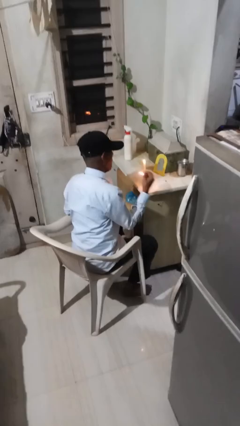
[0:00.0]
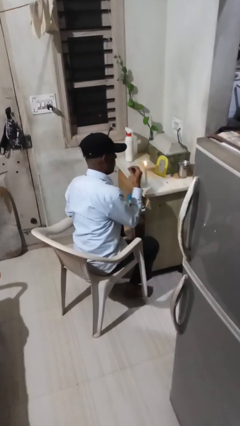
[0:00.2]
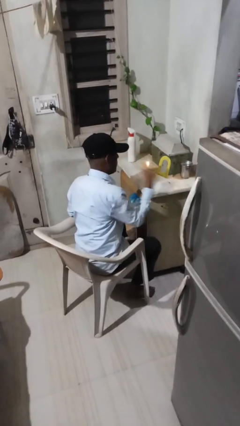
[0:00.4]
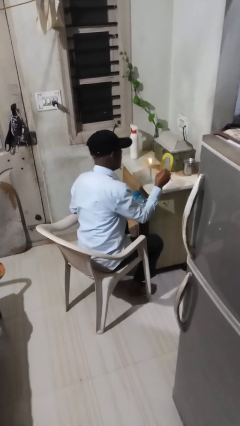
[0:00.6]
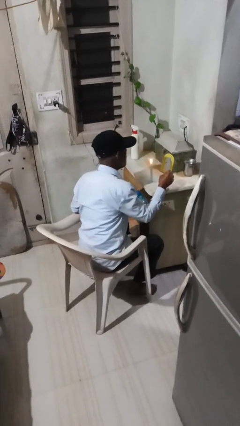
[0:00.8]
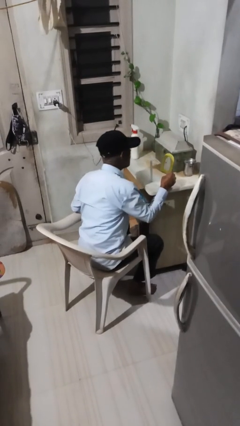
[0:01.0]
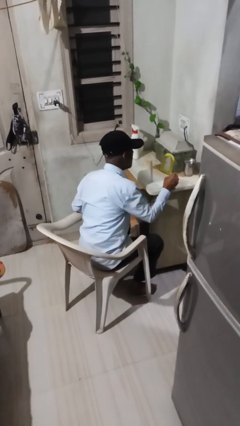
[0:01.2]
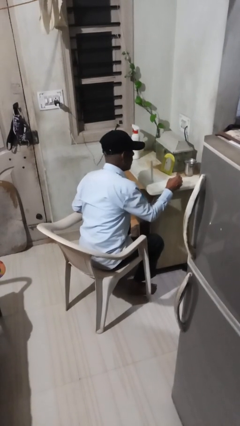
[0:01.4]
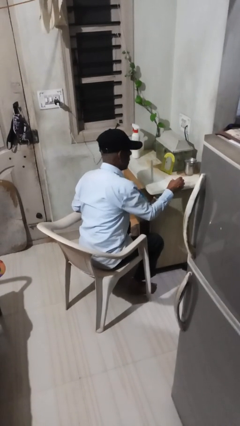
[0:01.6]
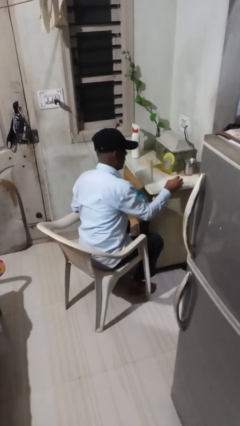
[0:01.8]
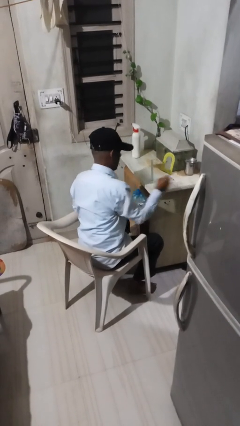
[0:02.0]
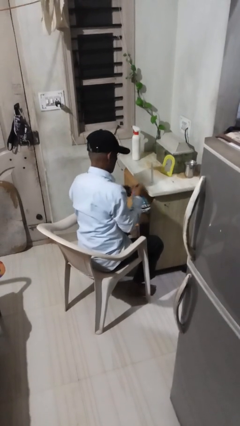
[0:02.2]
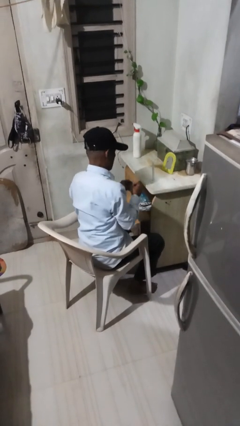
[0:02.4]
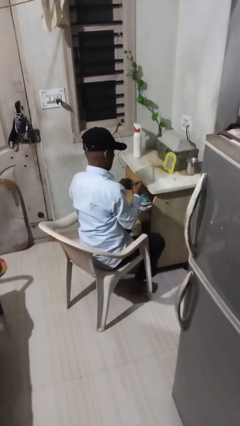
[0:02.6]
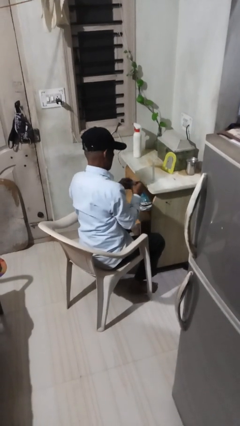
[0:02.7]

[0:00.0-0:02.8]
person extinguishes candle

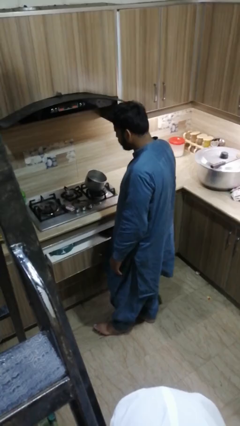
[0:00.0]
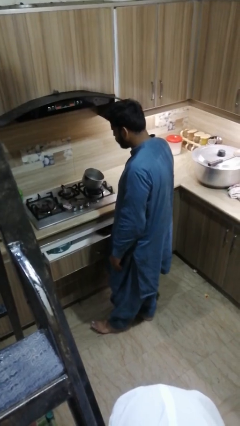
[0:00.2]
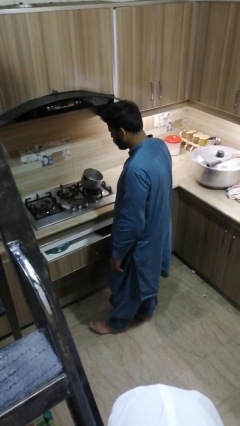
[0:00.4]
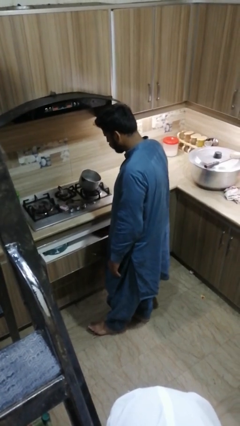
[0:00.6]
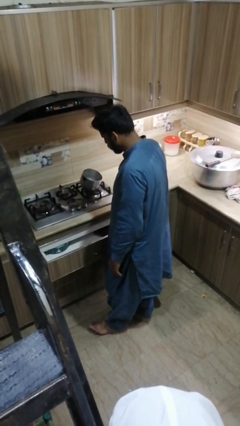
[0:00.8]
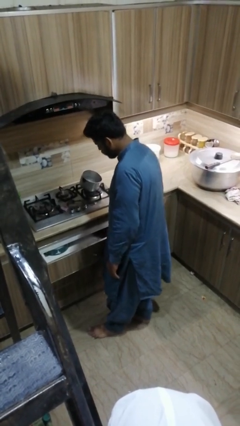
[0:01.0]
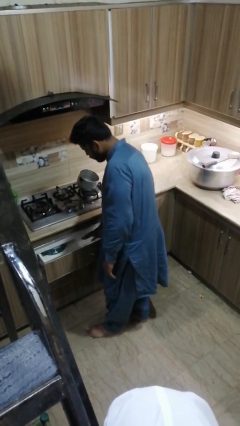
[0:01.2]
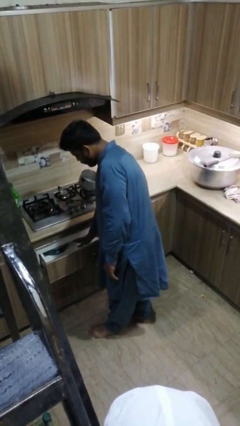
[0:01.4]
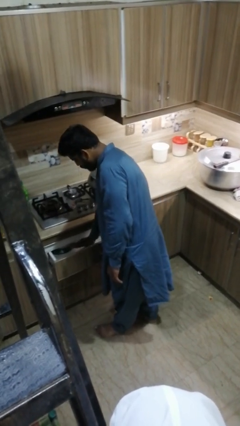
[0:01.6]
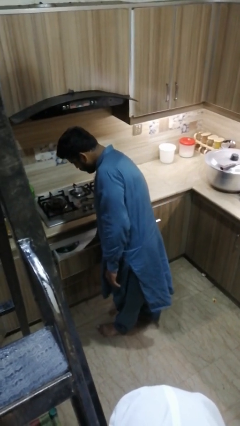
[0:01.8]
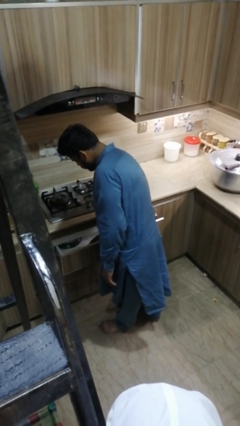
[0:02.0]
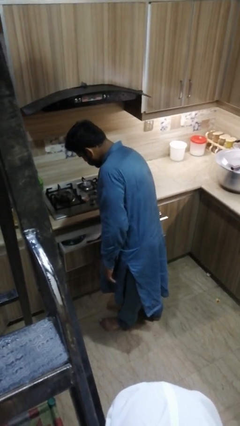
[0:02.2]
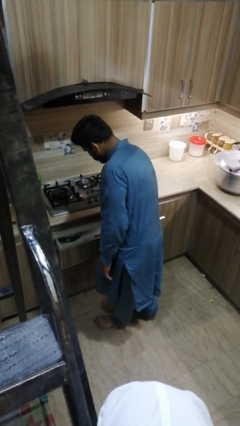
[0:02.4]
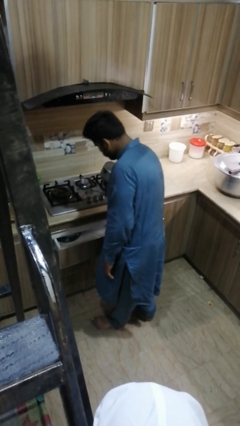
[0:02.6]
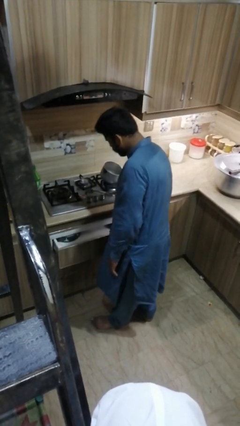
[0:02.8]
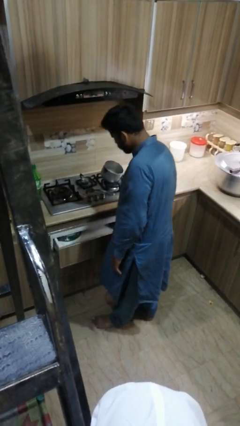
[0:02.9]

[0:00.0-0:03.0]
person searches in kitchen drawer

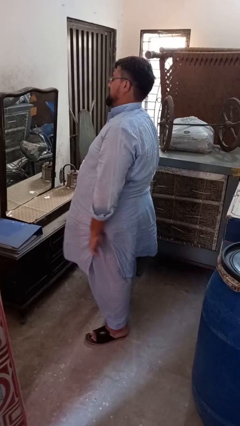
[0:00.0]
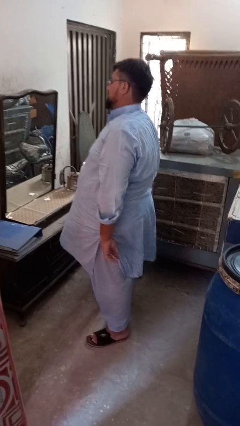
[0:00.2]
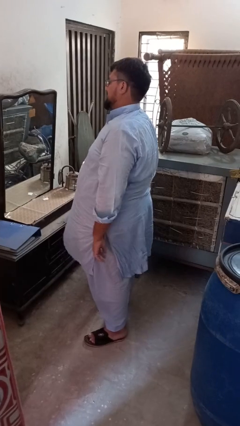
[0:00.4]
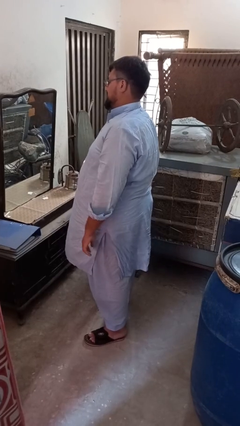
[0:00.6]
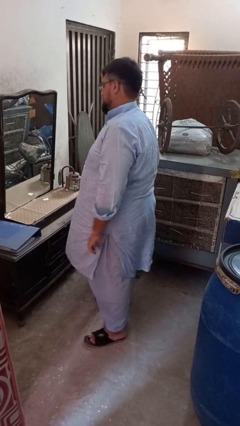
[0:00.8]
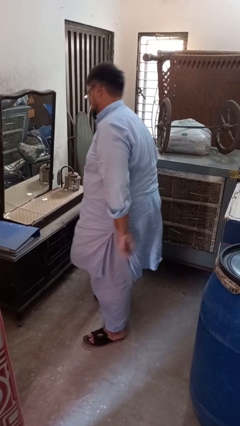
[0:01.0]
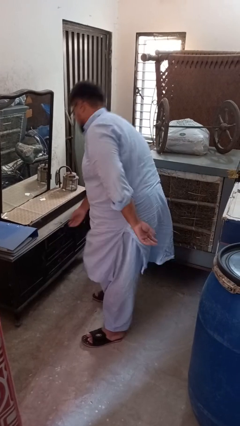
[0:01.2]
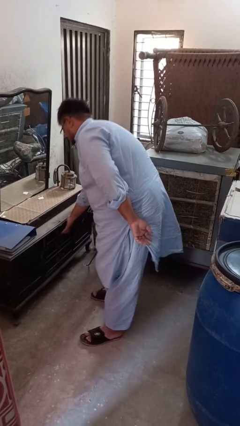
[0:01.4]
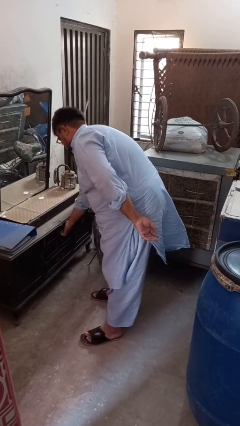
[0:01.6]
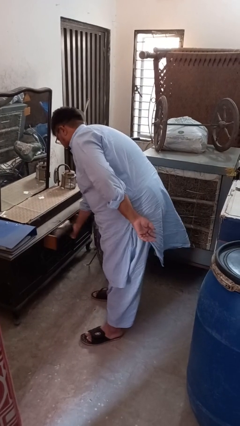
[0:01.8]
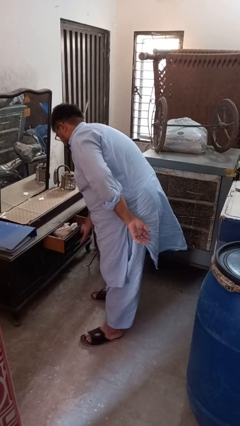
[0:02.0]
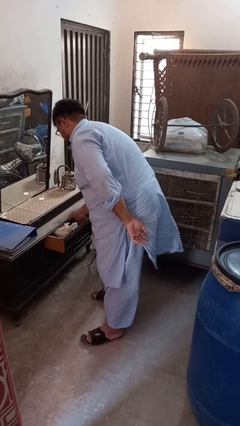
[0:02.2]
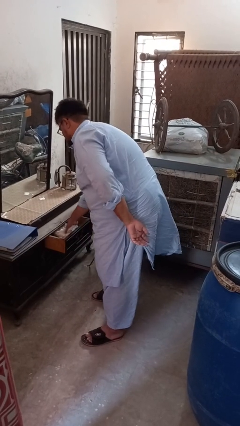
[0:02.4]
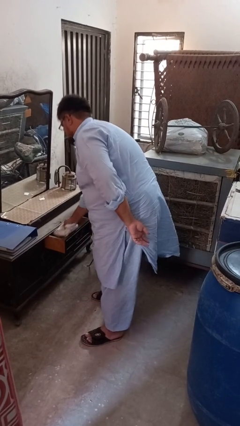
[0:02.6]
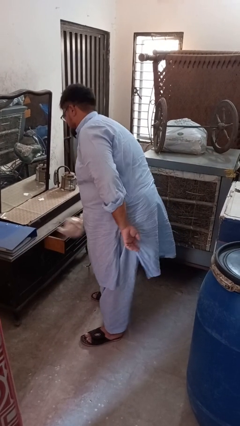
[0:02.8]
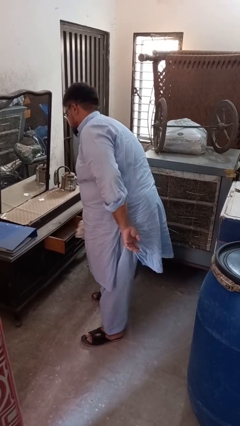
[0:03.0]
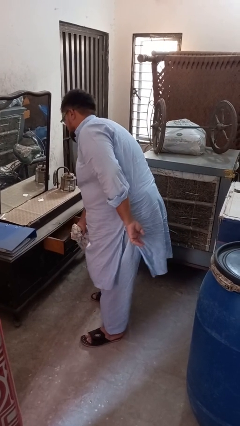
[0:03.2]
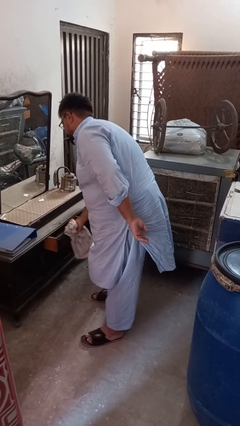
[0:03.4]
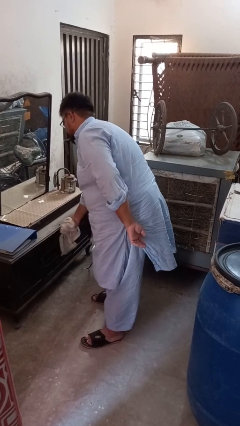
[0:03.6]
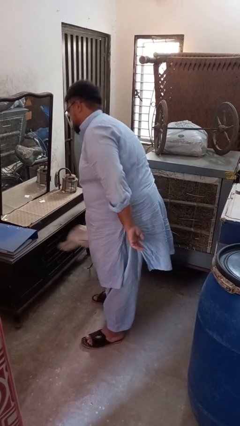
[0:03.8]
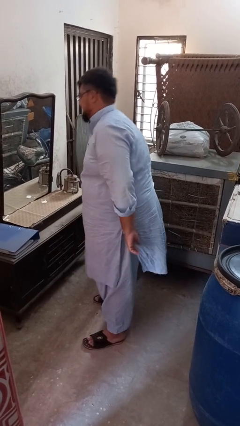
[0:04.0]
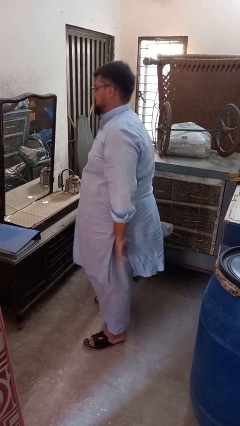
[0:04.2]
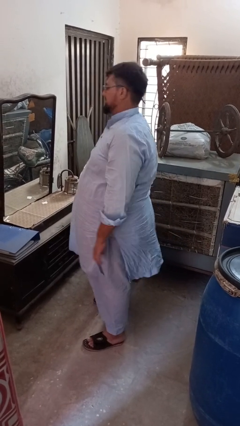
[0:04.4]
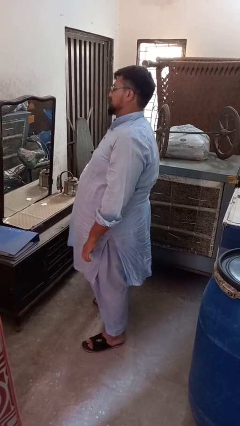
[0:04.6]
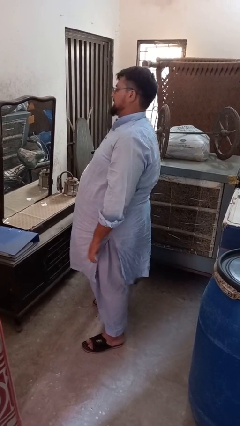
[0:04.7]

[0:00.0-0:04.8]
person takes clothes from dresser

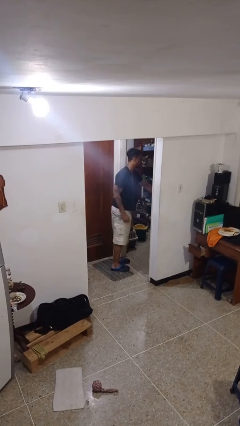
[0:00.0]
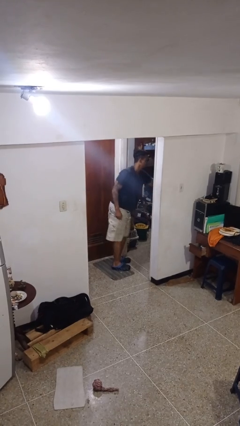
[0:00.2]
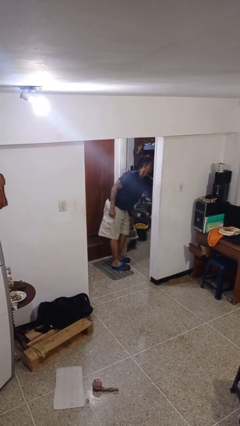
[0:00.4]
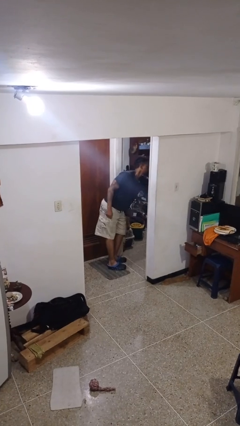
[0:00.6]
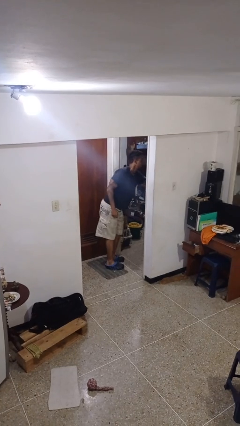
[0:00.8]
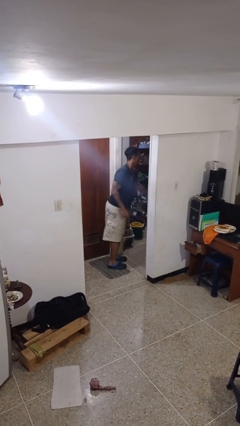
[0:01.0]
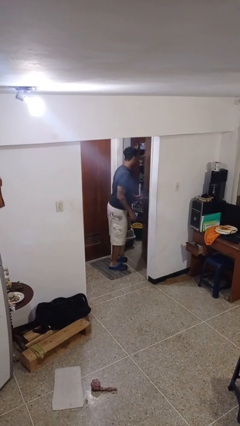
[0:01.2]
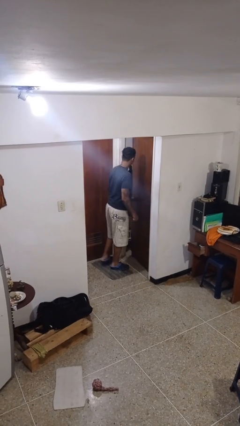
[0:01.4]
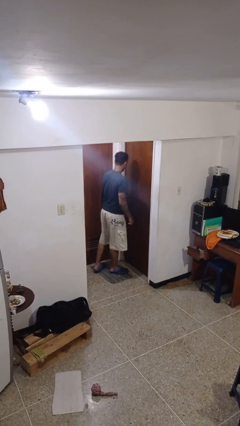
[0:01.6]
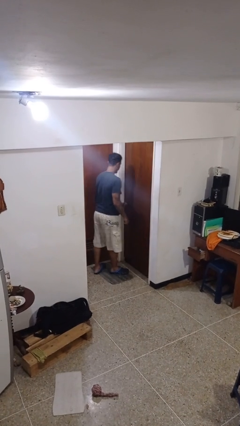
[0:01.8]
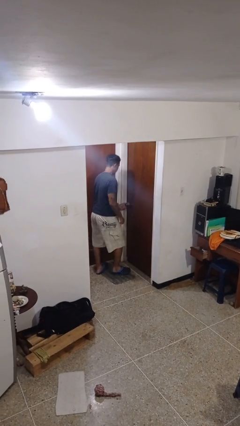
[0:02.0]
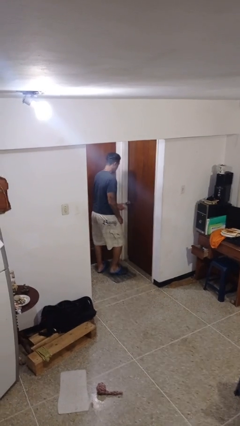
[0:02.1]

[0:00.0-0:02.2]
person closes facility door

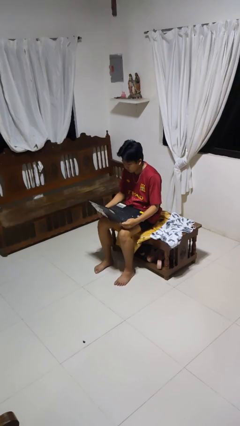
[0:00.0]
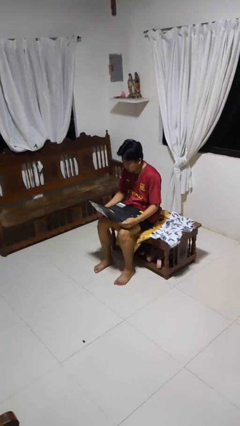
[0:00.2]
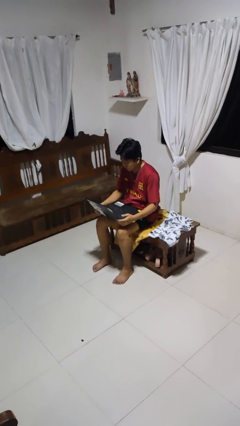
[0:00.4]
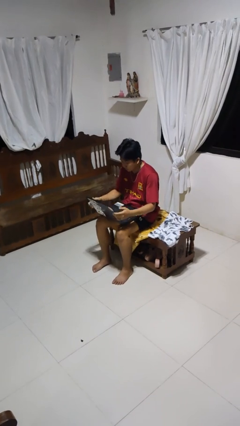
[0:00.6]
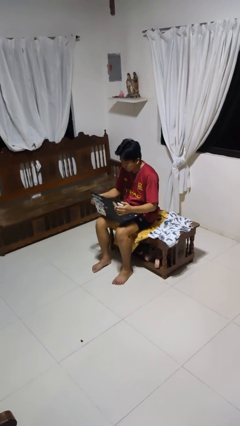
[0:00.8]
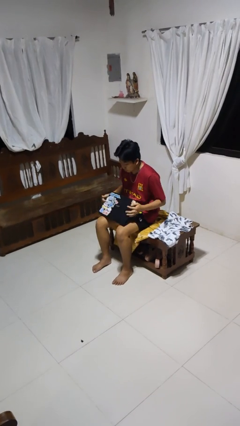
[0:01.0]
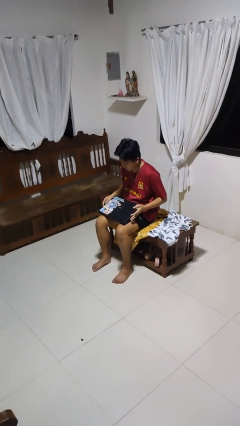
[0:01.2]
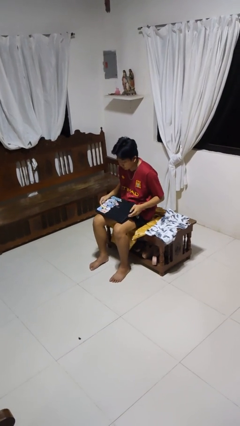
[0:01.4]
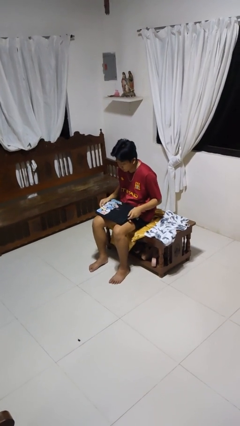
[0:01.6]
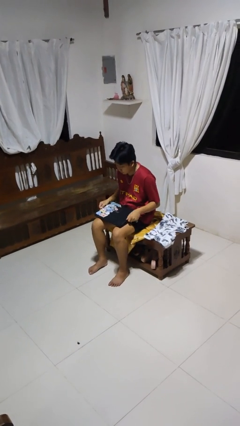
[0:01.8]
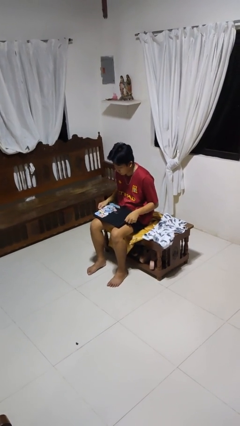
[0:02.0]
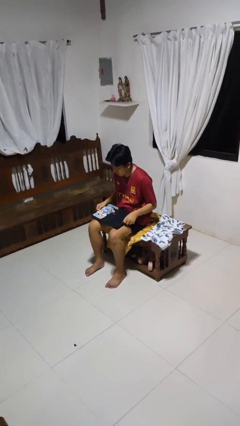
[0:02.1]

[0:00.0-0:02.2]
person closes laptop

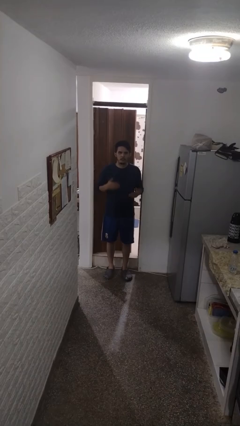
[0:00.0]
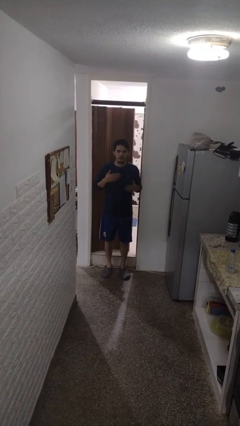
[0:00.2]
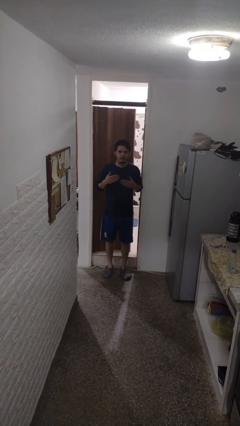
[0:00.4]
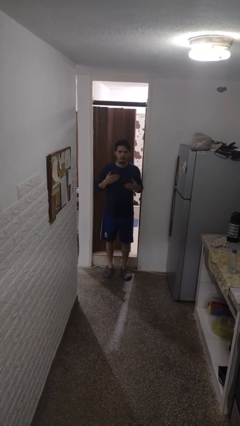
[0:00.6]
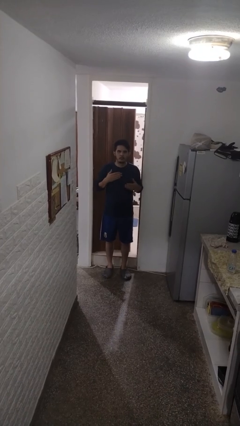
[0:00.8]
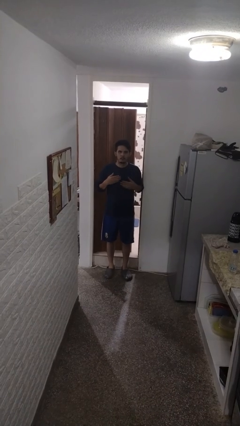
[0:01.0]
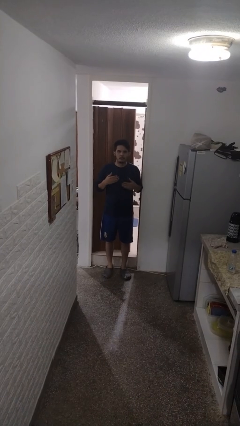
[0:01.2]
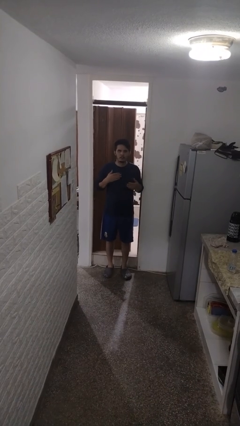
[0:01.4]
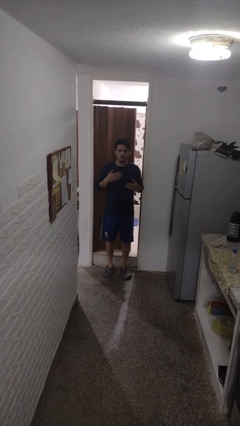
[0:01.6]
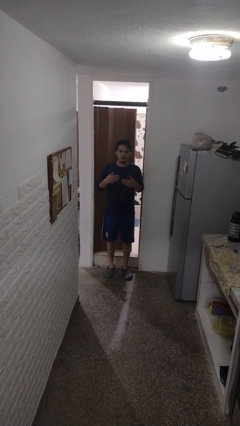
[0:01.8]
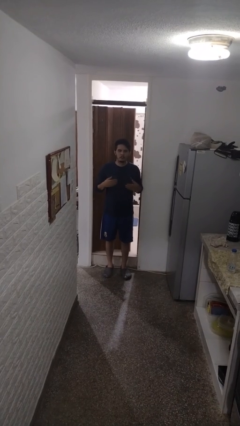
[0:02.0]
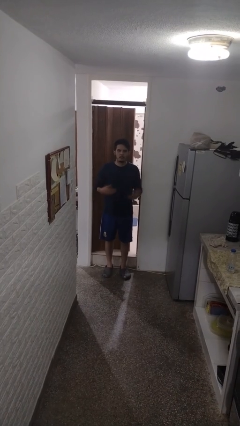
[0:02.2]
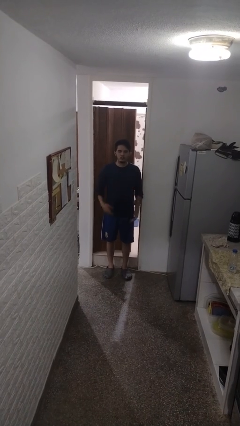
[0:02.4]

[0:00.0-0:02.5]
person drums on chest

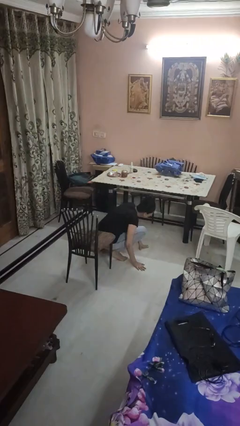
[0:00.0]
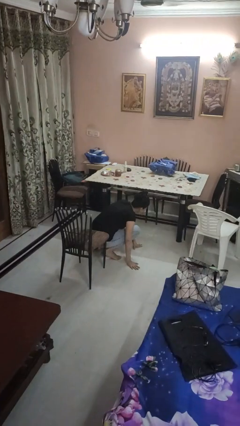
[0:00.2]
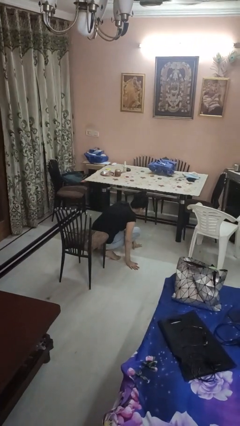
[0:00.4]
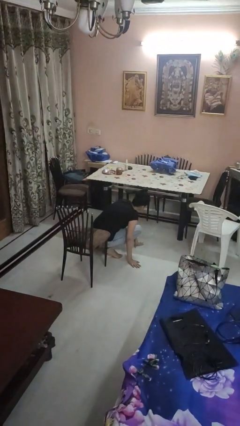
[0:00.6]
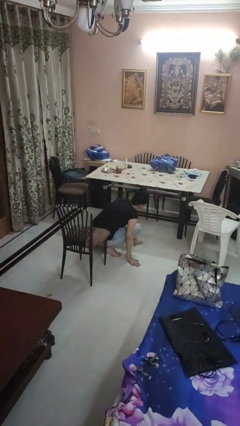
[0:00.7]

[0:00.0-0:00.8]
person falls from chair
